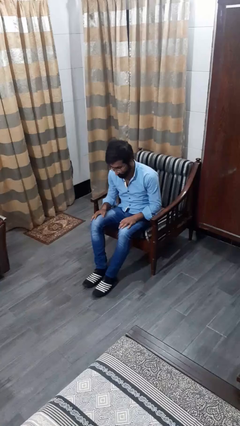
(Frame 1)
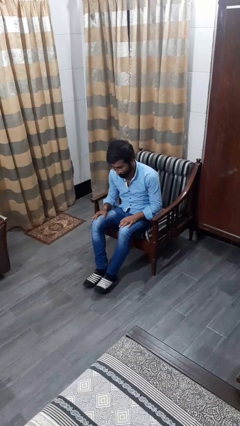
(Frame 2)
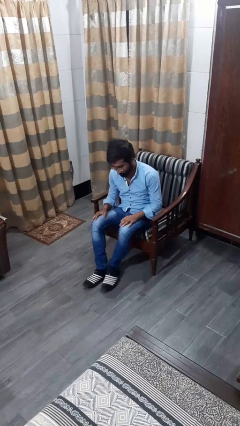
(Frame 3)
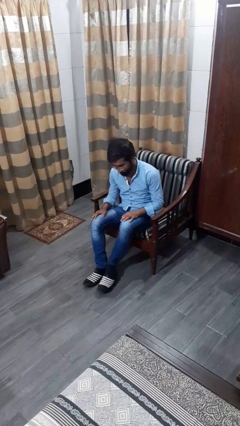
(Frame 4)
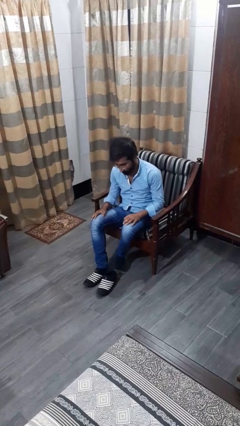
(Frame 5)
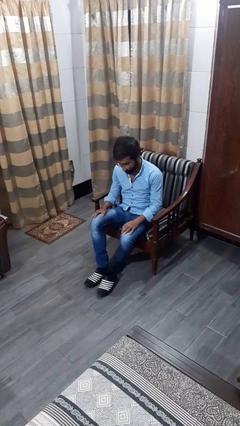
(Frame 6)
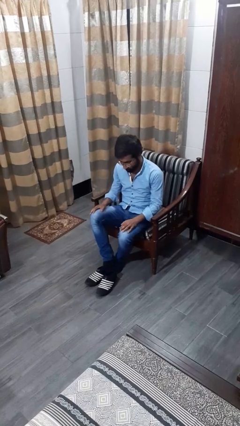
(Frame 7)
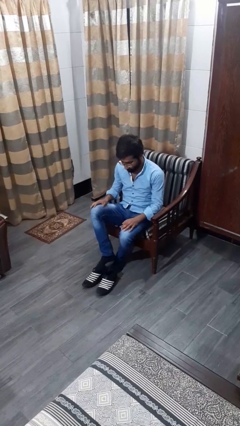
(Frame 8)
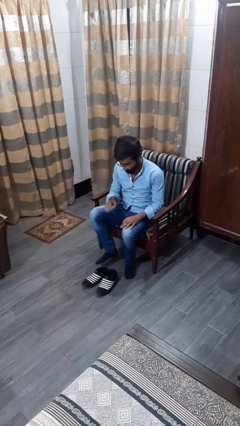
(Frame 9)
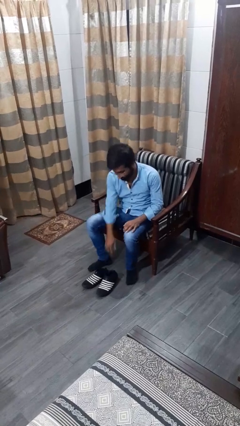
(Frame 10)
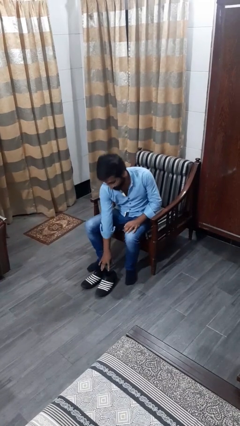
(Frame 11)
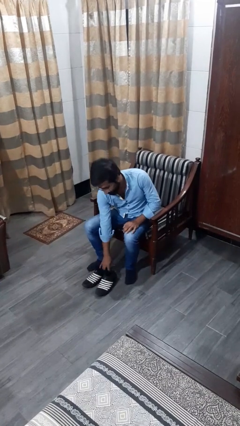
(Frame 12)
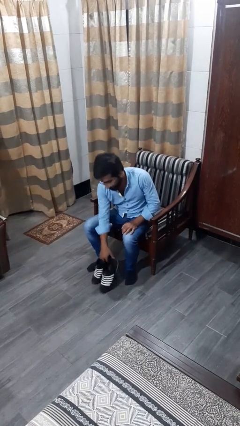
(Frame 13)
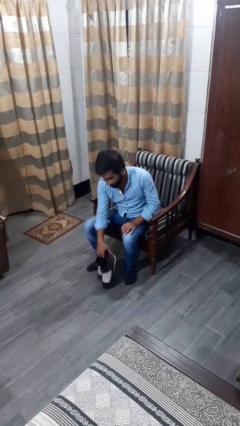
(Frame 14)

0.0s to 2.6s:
person takes off shoes

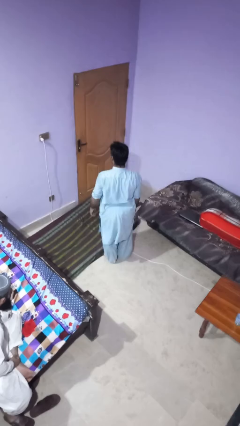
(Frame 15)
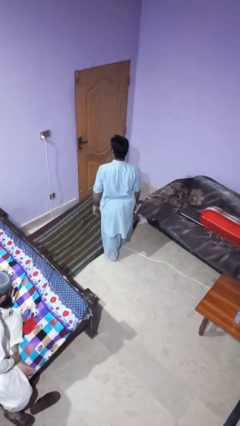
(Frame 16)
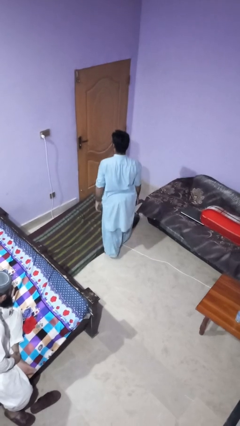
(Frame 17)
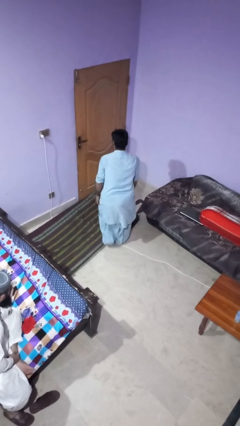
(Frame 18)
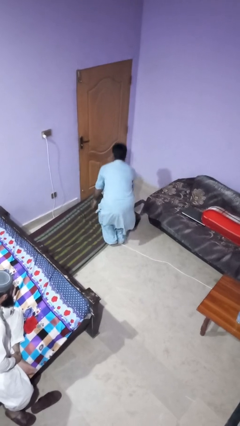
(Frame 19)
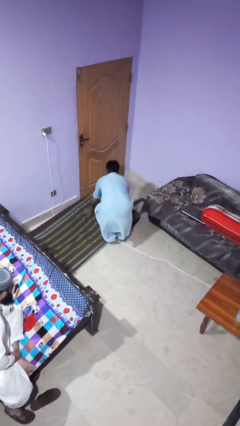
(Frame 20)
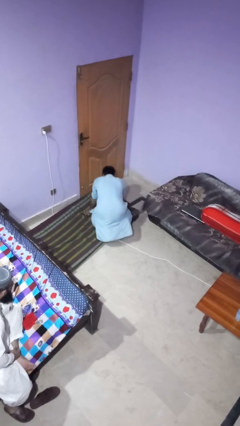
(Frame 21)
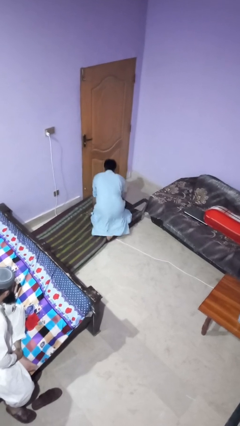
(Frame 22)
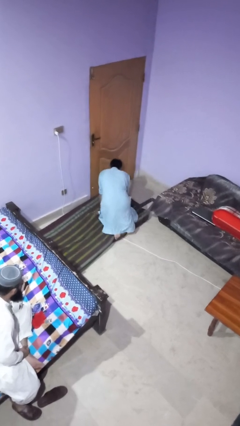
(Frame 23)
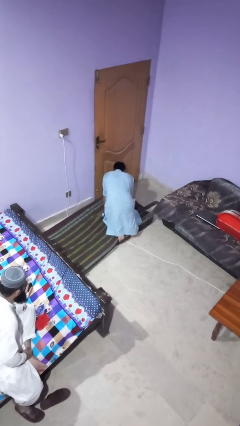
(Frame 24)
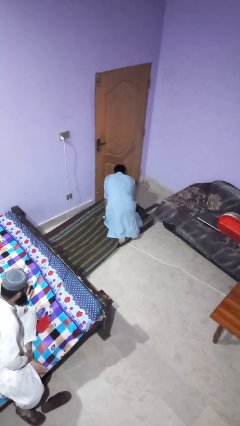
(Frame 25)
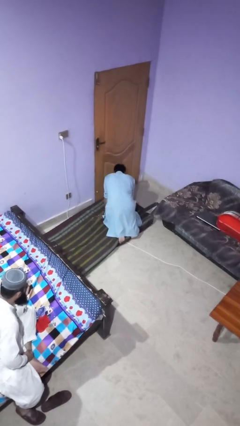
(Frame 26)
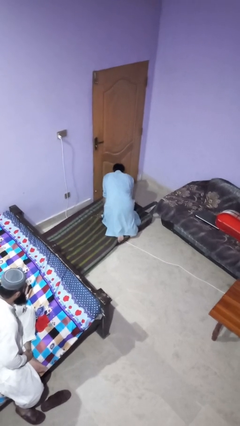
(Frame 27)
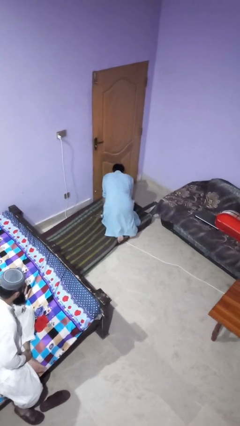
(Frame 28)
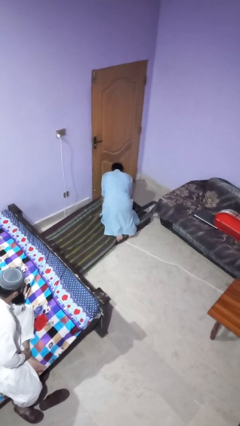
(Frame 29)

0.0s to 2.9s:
person trips on object on floor

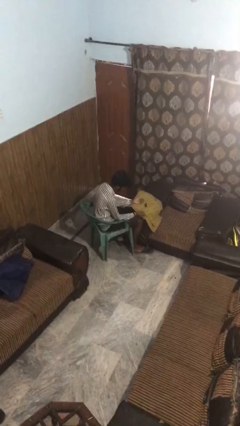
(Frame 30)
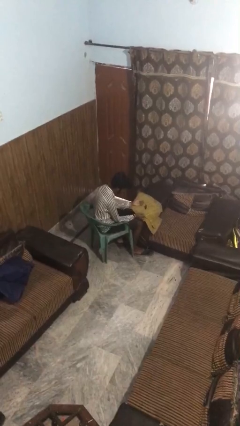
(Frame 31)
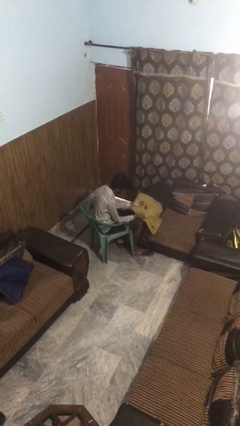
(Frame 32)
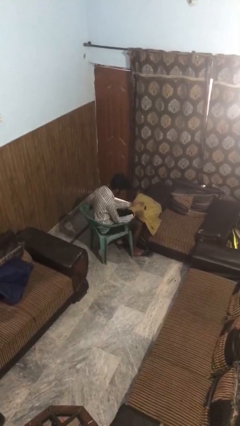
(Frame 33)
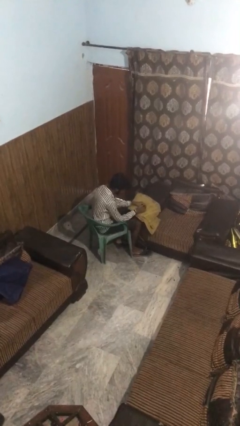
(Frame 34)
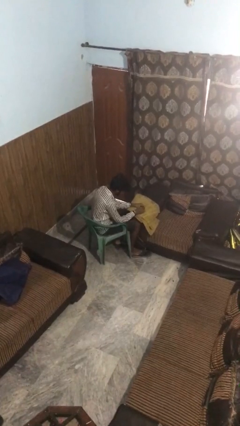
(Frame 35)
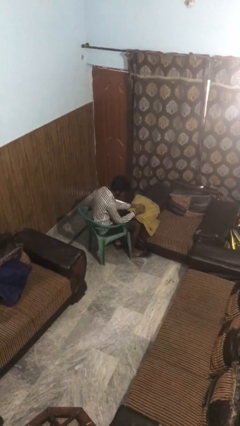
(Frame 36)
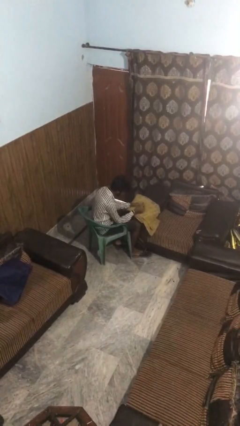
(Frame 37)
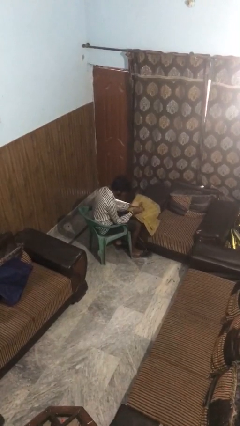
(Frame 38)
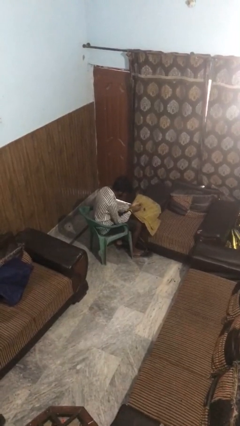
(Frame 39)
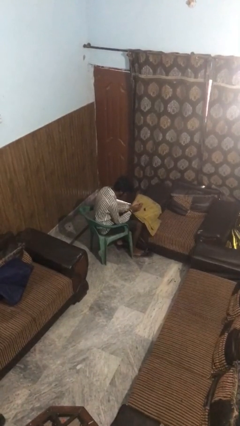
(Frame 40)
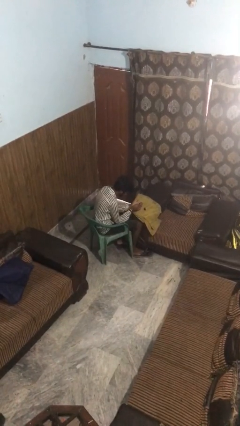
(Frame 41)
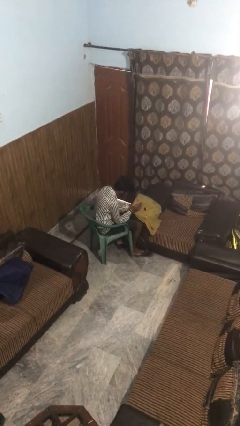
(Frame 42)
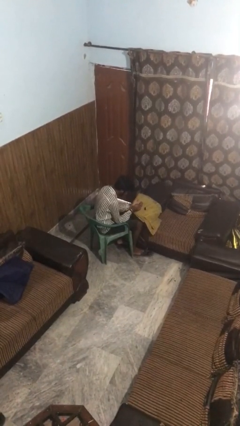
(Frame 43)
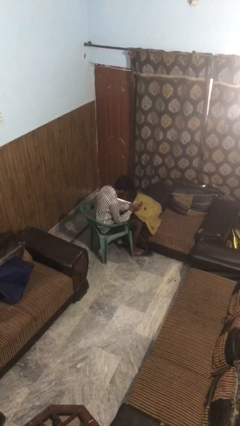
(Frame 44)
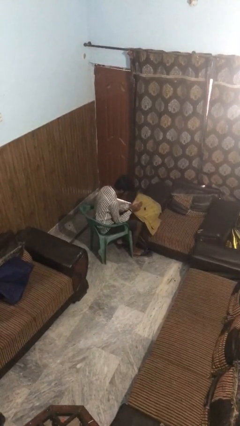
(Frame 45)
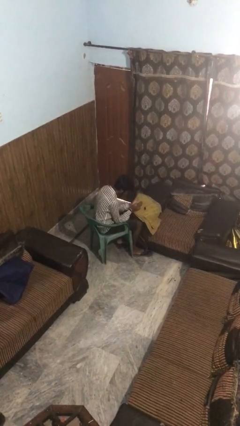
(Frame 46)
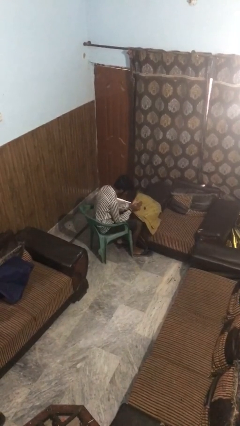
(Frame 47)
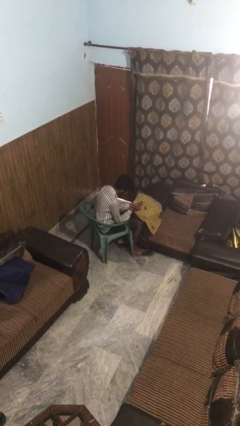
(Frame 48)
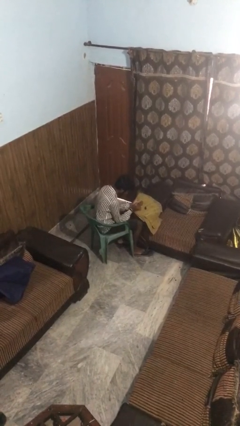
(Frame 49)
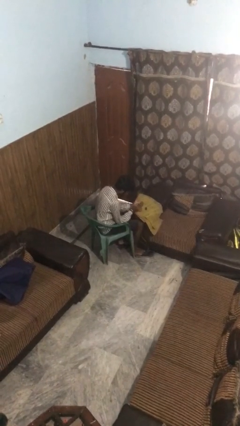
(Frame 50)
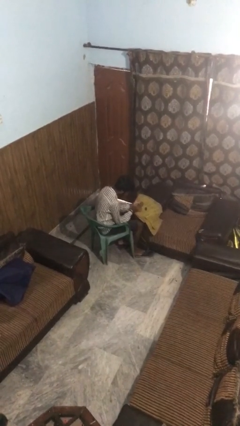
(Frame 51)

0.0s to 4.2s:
person paints fingernails

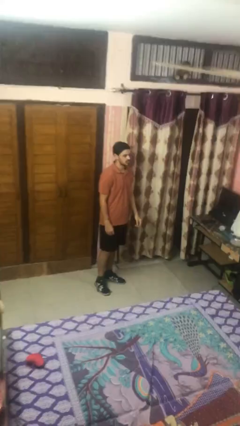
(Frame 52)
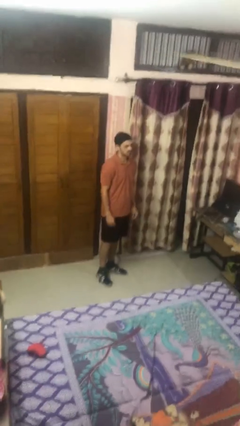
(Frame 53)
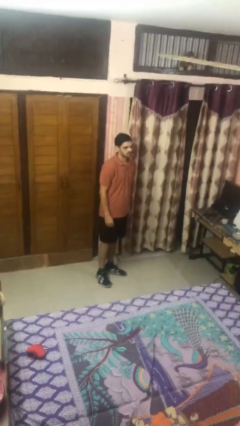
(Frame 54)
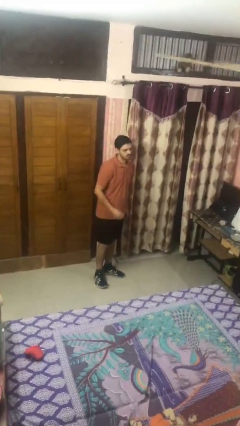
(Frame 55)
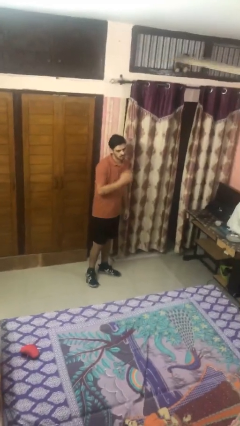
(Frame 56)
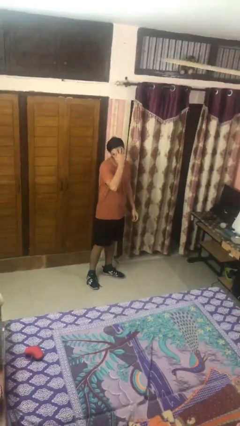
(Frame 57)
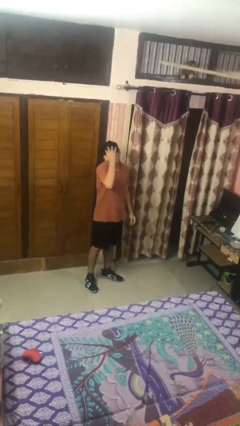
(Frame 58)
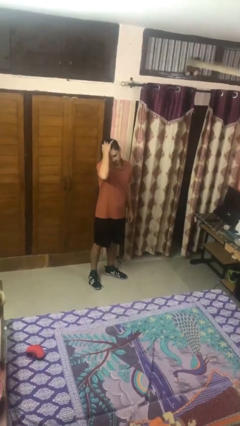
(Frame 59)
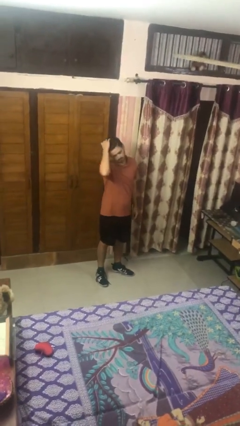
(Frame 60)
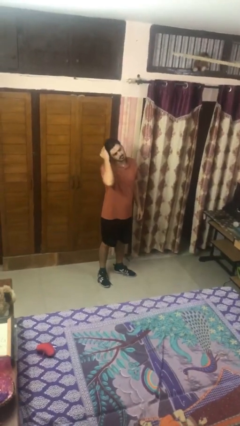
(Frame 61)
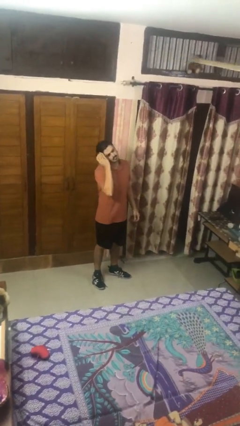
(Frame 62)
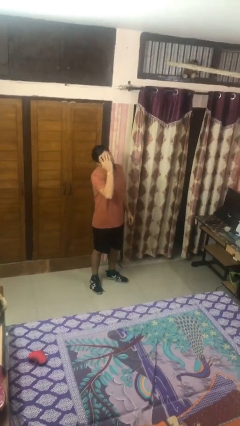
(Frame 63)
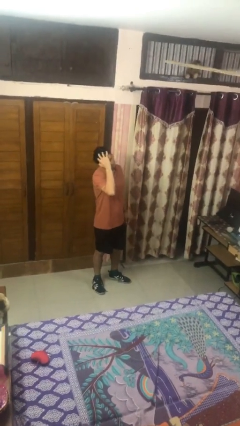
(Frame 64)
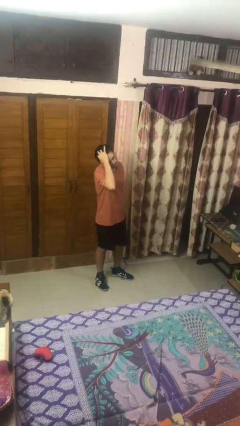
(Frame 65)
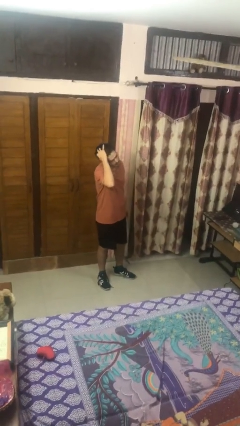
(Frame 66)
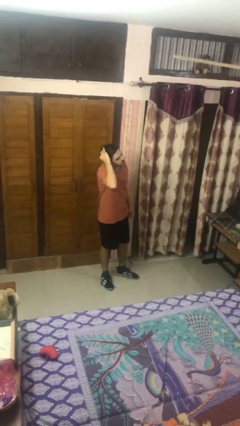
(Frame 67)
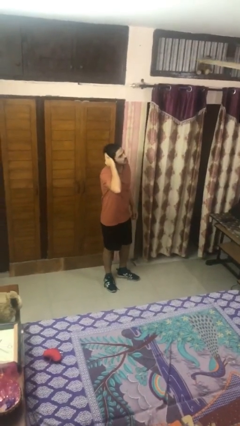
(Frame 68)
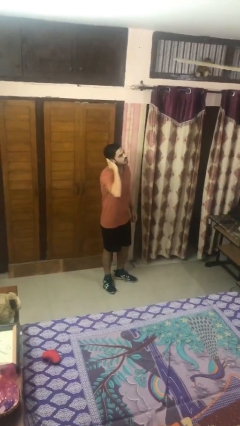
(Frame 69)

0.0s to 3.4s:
person strokes hair

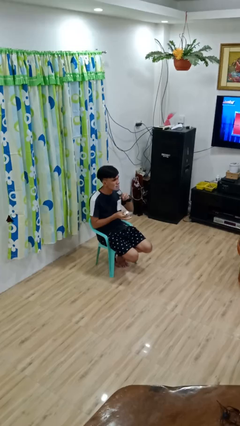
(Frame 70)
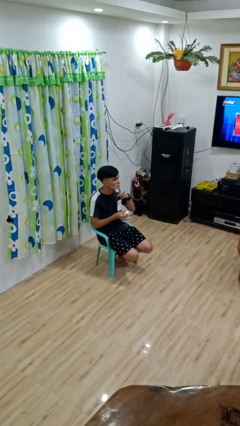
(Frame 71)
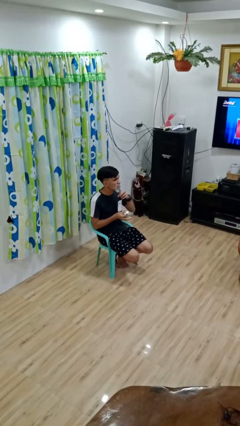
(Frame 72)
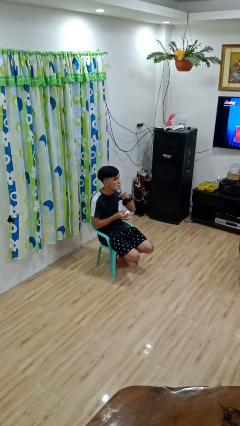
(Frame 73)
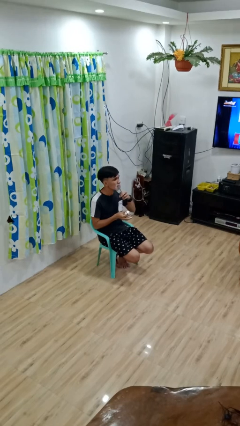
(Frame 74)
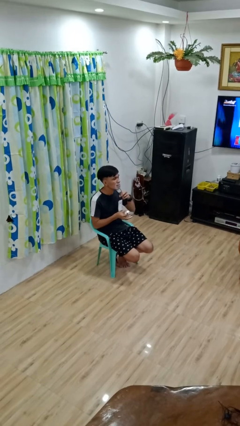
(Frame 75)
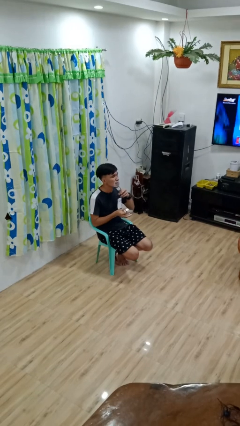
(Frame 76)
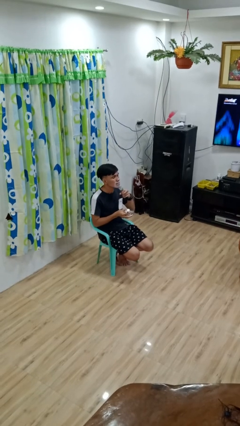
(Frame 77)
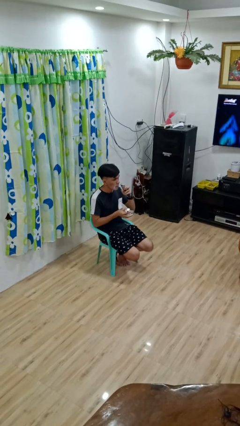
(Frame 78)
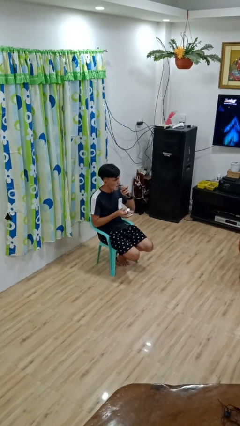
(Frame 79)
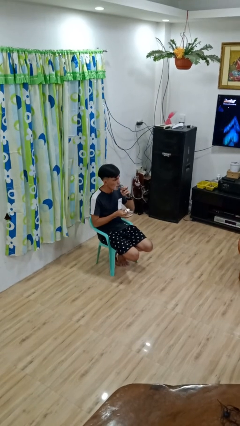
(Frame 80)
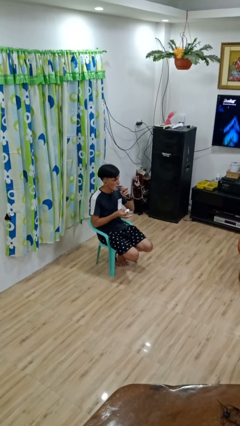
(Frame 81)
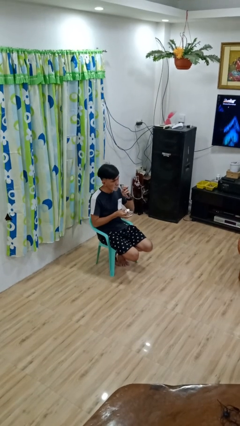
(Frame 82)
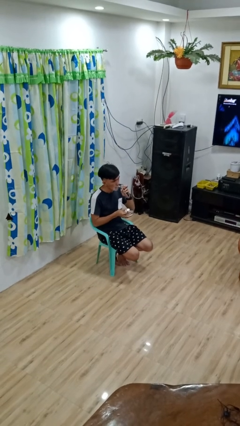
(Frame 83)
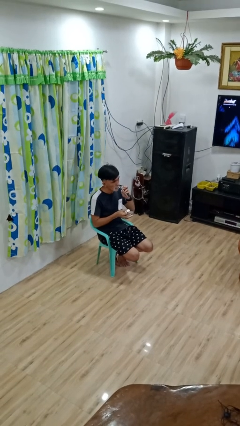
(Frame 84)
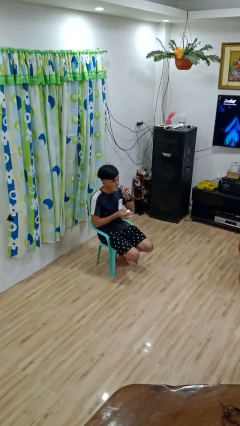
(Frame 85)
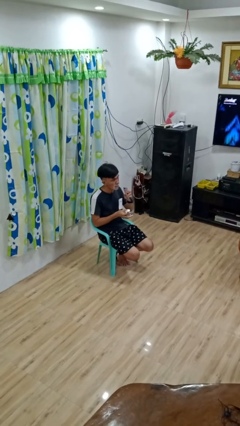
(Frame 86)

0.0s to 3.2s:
person shaves face

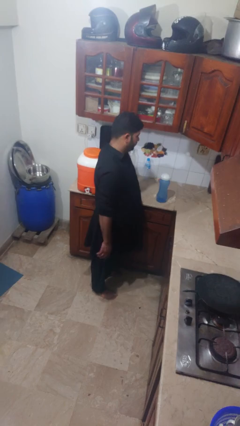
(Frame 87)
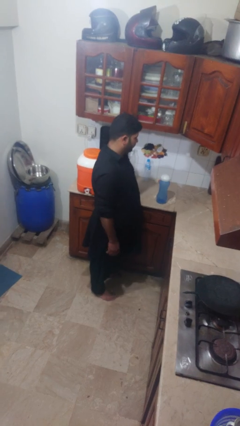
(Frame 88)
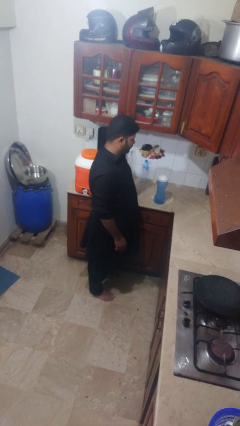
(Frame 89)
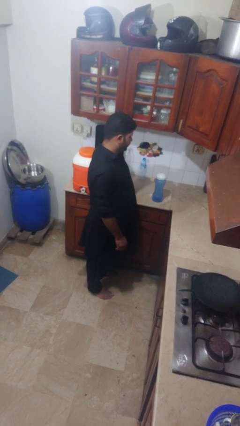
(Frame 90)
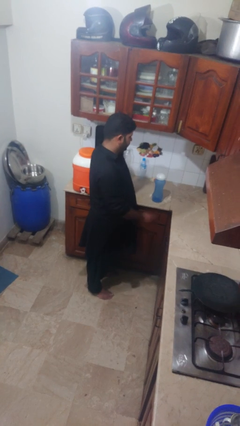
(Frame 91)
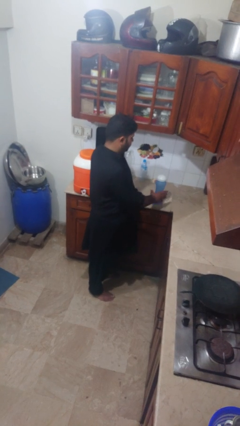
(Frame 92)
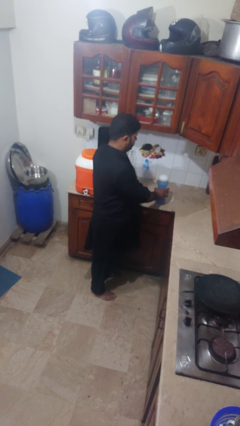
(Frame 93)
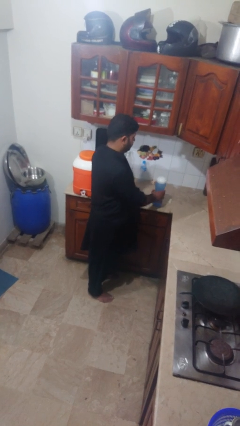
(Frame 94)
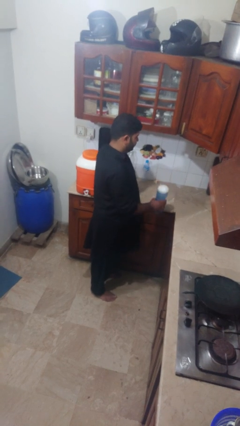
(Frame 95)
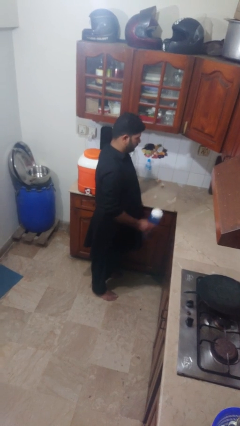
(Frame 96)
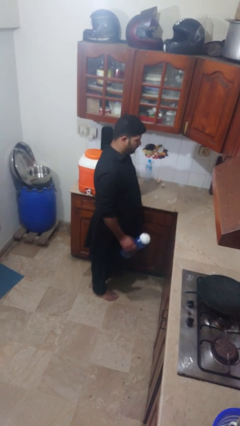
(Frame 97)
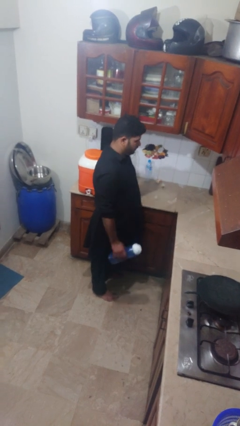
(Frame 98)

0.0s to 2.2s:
person picks up object from countertop
